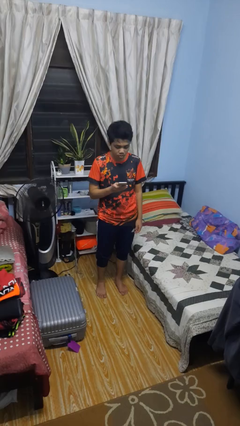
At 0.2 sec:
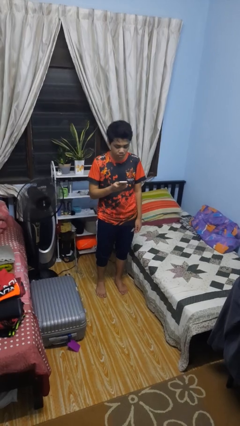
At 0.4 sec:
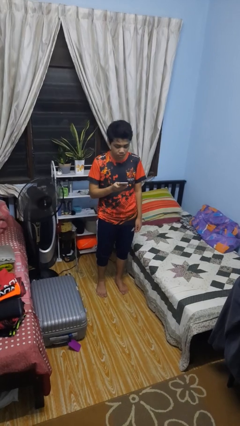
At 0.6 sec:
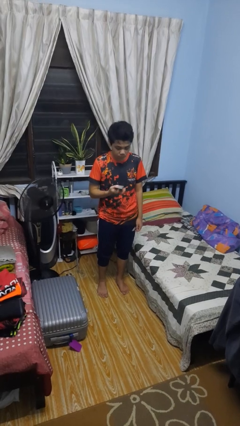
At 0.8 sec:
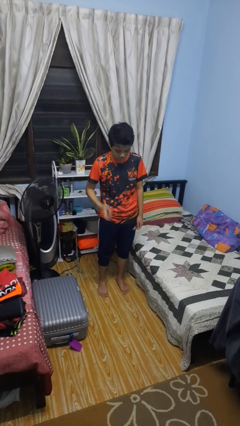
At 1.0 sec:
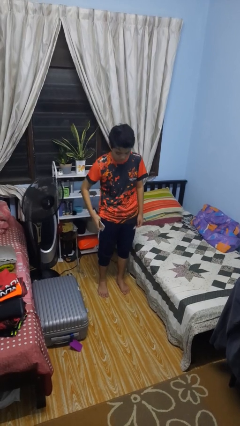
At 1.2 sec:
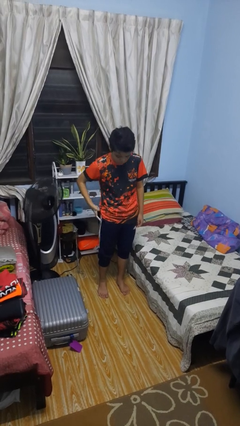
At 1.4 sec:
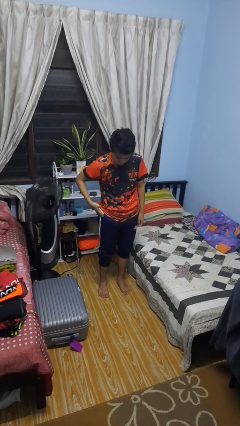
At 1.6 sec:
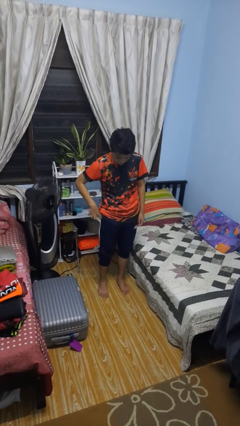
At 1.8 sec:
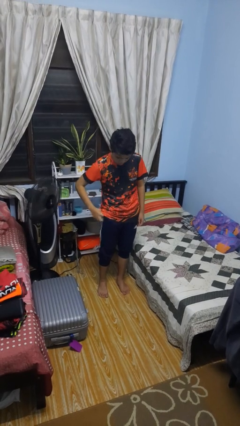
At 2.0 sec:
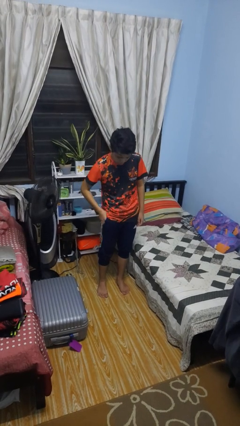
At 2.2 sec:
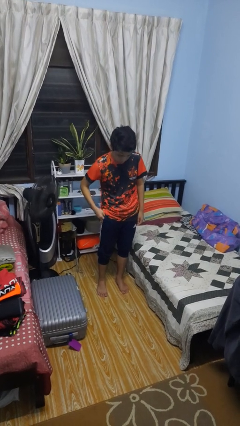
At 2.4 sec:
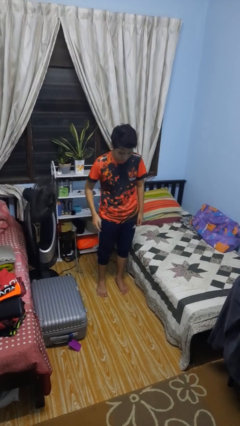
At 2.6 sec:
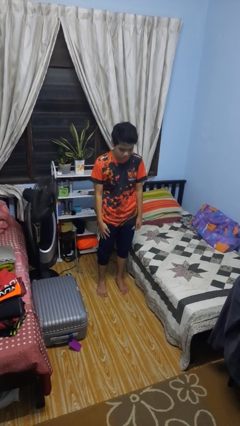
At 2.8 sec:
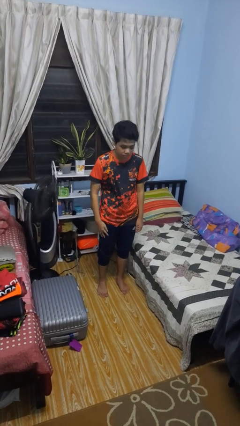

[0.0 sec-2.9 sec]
person puts phone into pocket

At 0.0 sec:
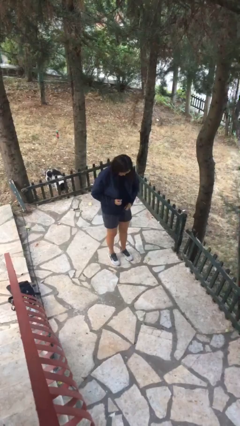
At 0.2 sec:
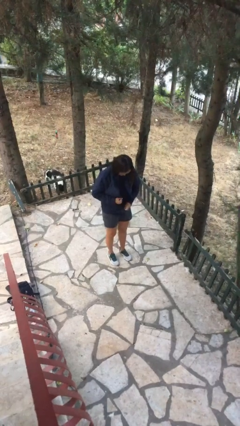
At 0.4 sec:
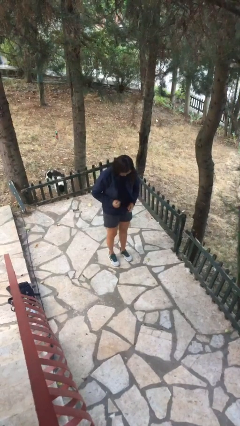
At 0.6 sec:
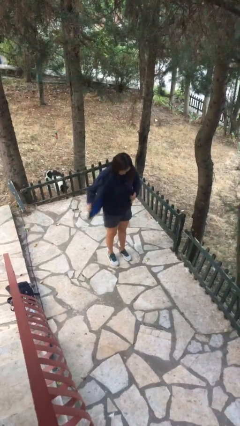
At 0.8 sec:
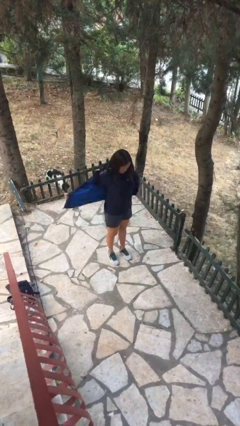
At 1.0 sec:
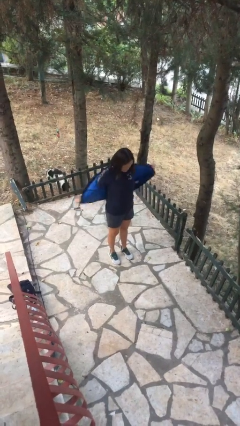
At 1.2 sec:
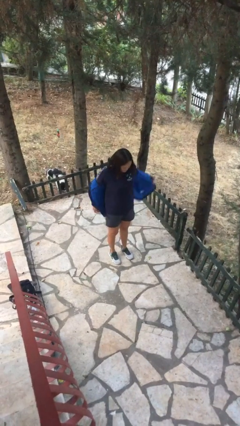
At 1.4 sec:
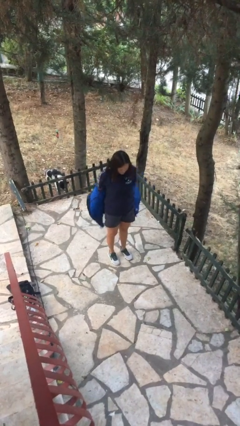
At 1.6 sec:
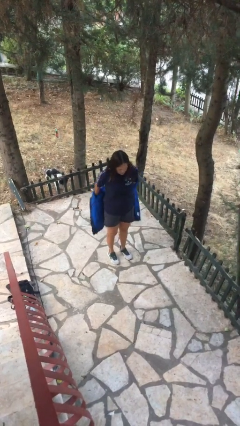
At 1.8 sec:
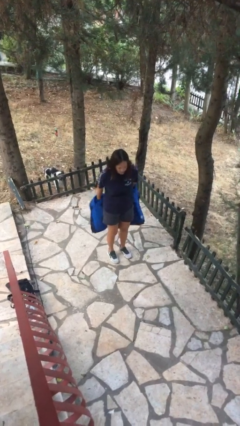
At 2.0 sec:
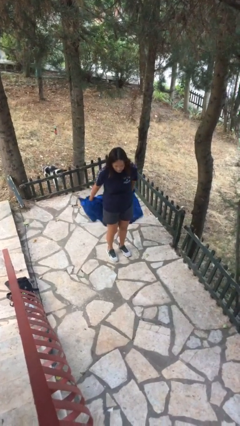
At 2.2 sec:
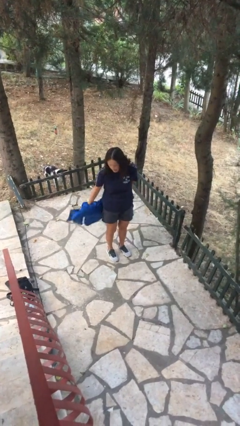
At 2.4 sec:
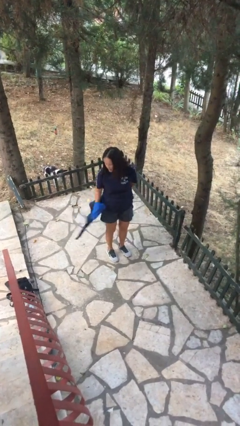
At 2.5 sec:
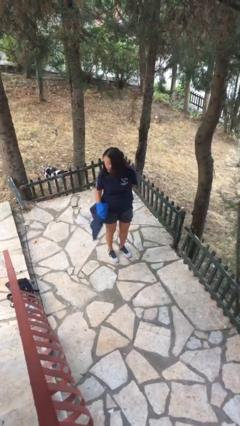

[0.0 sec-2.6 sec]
person takes off jacket

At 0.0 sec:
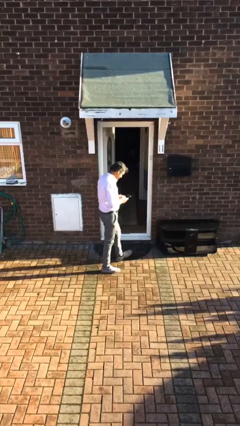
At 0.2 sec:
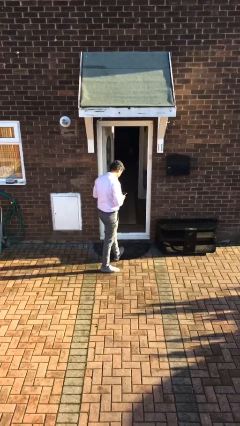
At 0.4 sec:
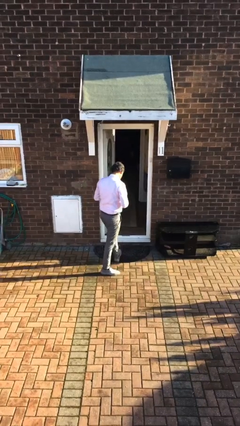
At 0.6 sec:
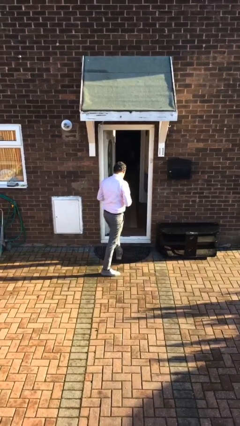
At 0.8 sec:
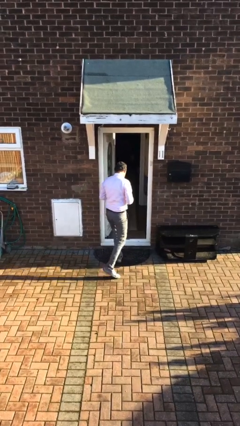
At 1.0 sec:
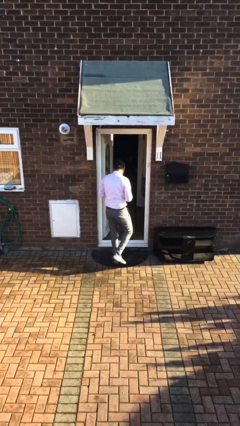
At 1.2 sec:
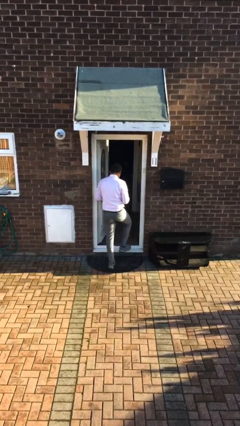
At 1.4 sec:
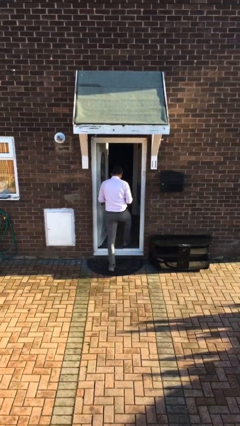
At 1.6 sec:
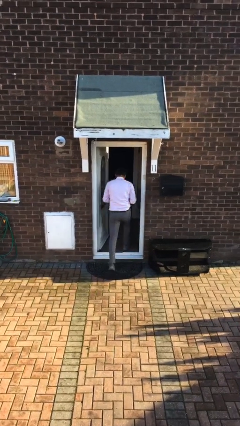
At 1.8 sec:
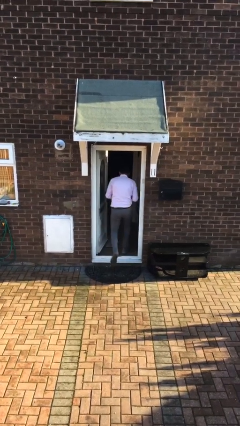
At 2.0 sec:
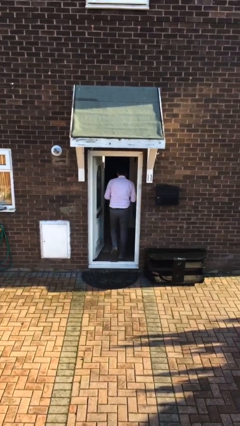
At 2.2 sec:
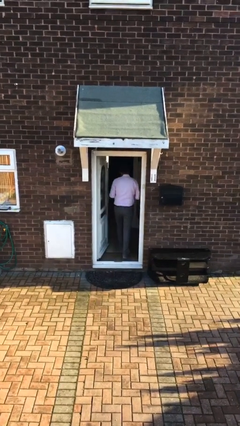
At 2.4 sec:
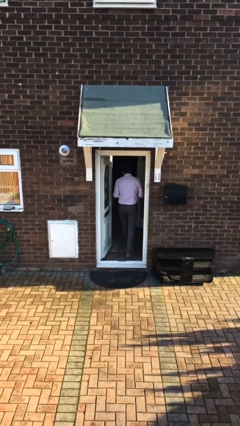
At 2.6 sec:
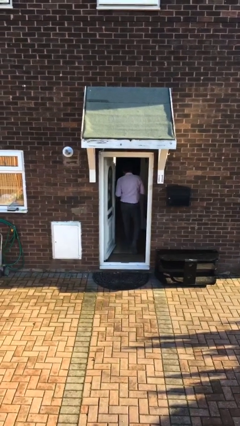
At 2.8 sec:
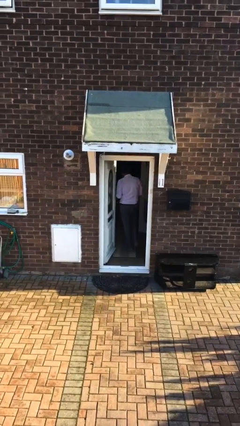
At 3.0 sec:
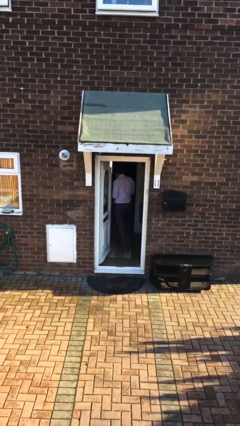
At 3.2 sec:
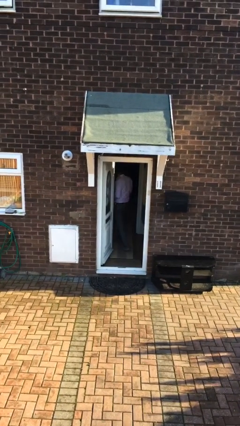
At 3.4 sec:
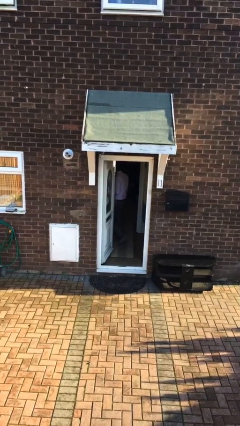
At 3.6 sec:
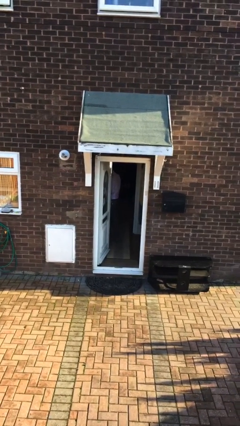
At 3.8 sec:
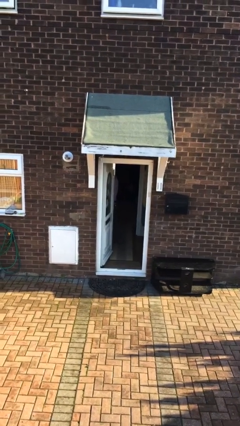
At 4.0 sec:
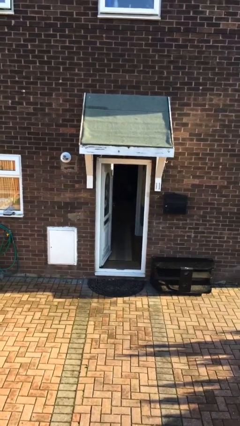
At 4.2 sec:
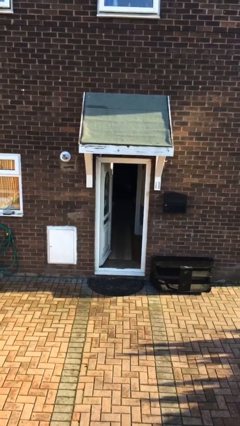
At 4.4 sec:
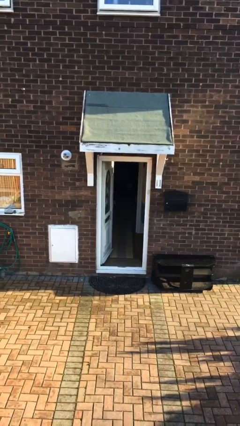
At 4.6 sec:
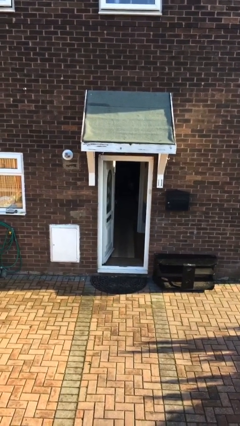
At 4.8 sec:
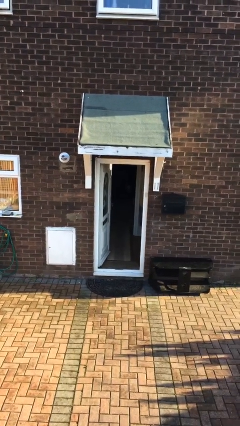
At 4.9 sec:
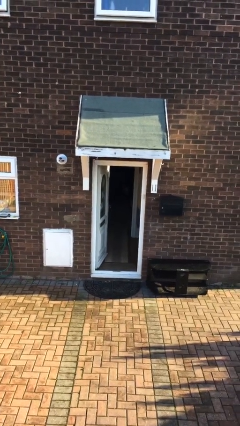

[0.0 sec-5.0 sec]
person exits scene through structure

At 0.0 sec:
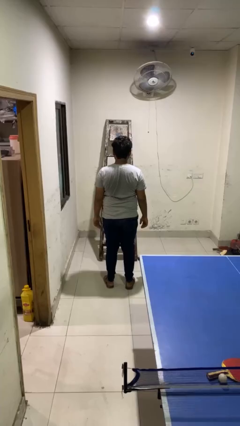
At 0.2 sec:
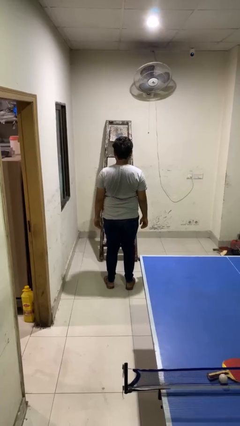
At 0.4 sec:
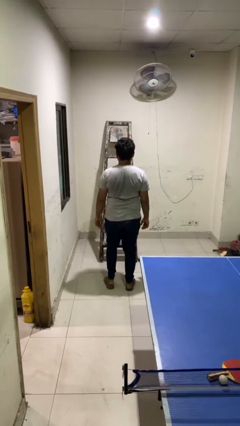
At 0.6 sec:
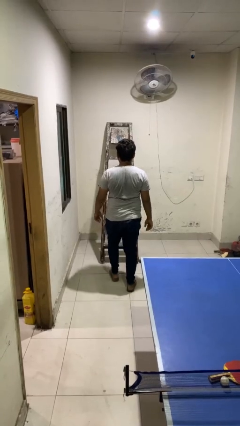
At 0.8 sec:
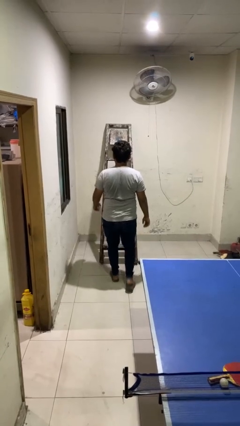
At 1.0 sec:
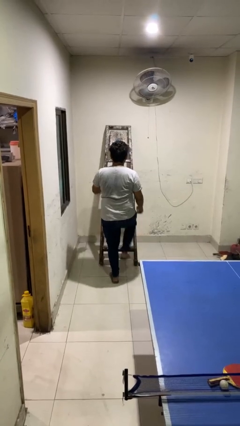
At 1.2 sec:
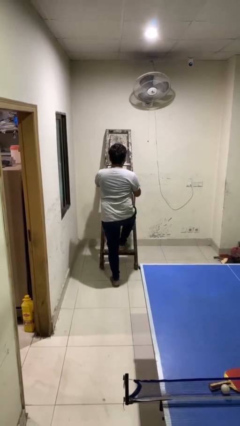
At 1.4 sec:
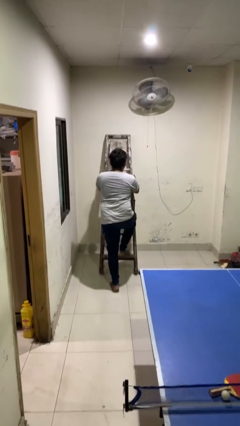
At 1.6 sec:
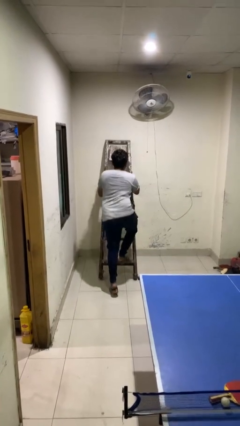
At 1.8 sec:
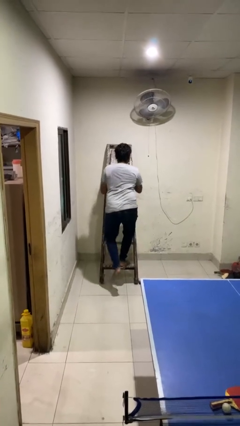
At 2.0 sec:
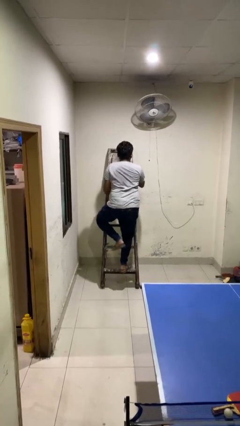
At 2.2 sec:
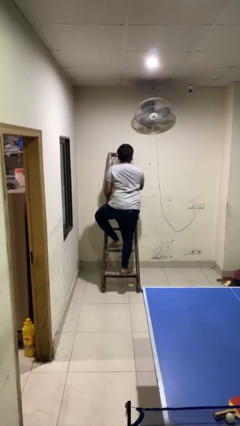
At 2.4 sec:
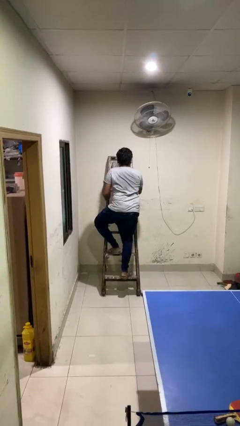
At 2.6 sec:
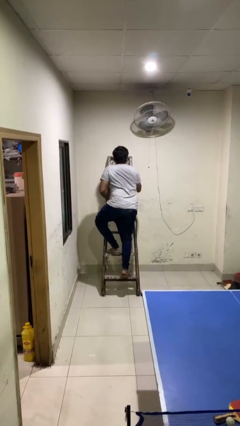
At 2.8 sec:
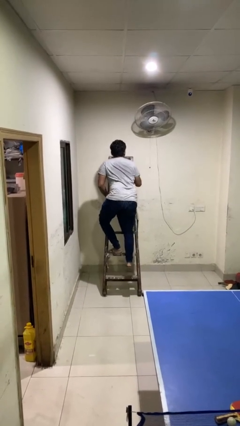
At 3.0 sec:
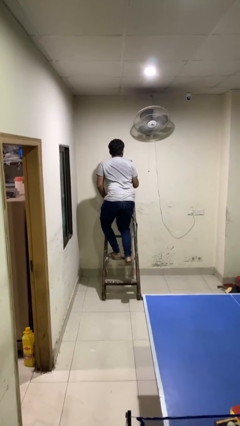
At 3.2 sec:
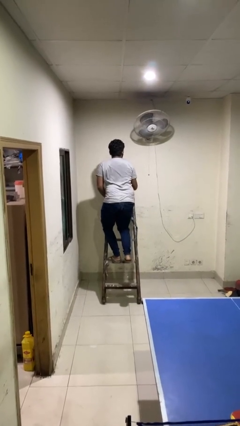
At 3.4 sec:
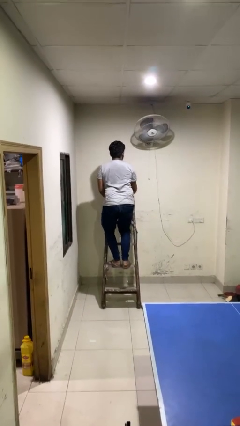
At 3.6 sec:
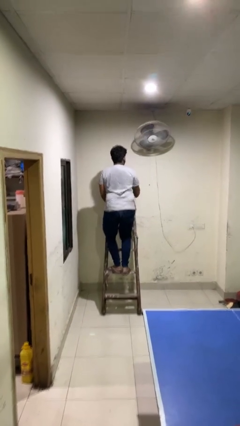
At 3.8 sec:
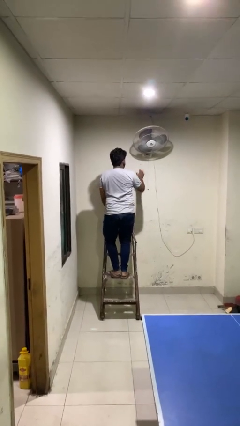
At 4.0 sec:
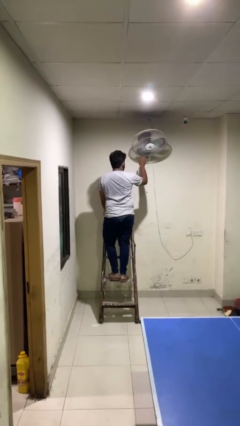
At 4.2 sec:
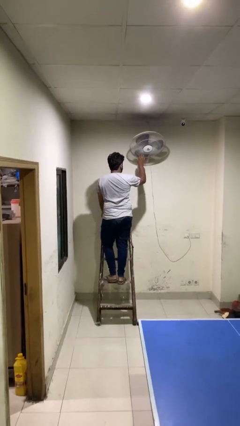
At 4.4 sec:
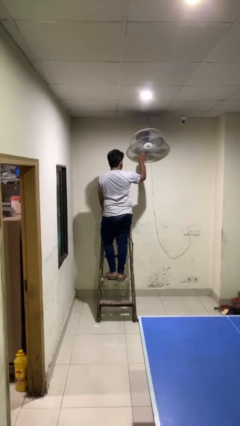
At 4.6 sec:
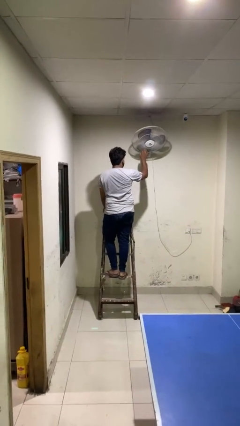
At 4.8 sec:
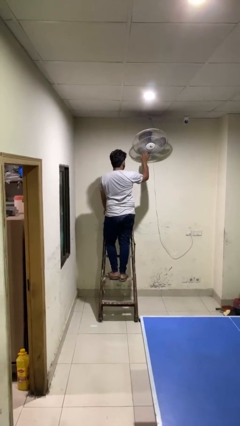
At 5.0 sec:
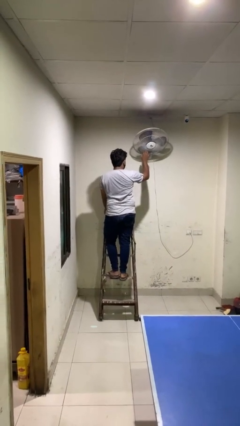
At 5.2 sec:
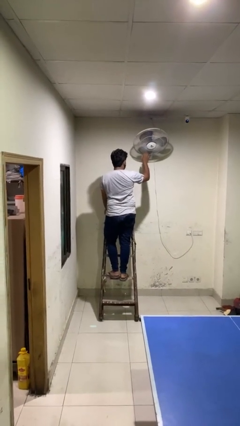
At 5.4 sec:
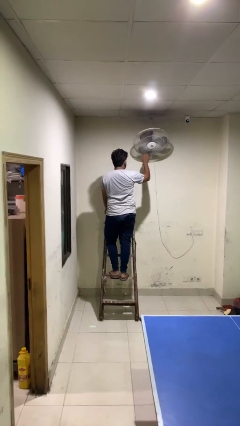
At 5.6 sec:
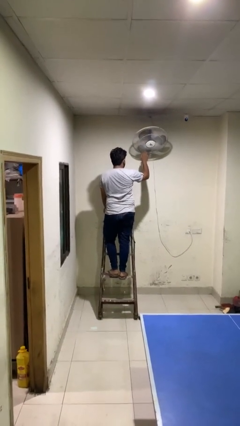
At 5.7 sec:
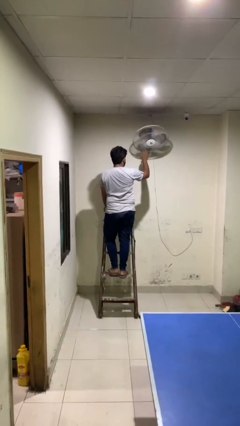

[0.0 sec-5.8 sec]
person climbs up ladder

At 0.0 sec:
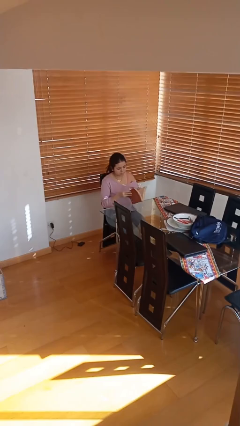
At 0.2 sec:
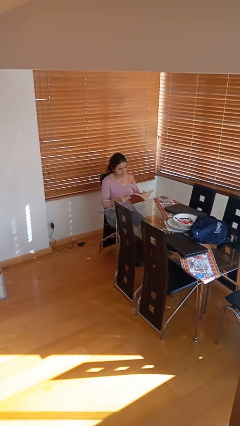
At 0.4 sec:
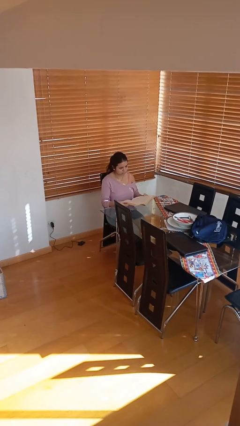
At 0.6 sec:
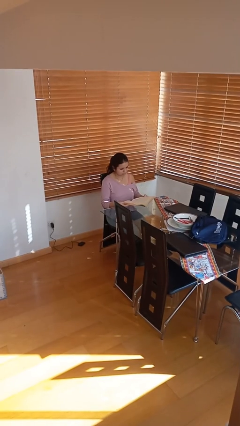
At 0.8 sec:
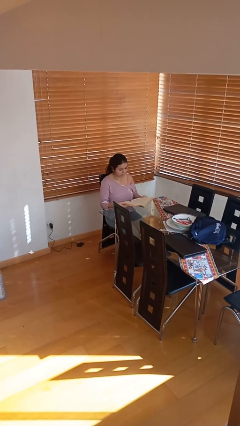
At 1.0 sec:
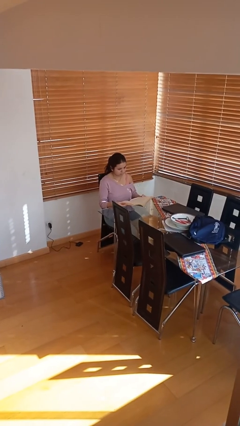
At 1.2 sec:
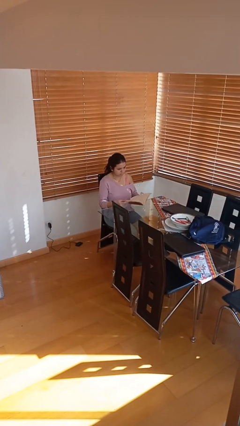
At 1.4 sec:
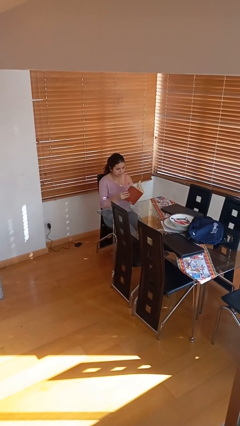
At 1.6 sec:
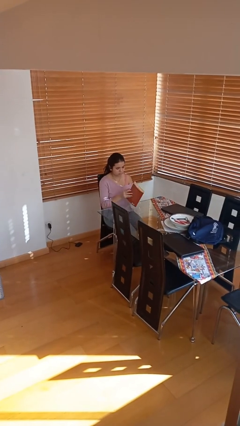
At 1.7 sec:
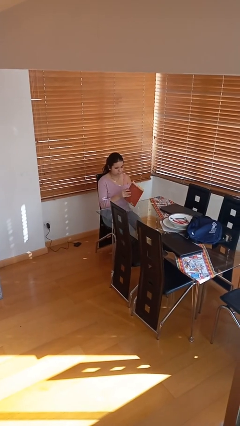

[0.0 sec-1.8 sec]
person reads document
